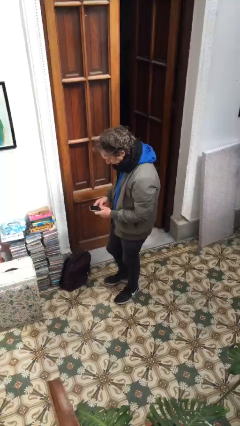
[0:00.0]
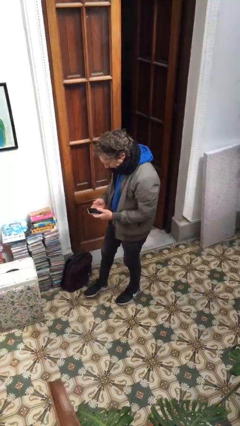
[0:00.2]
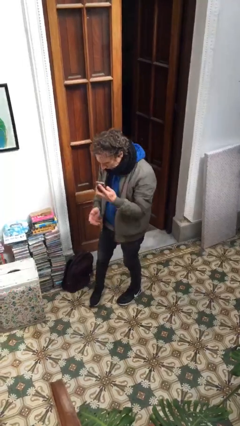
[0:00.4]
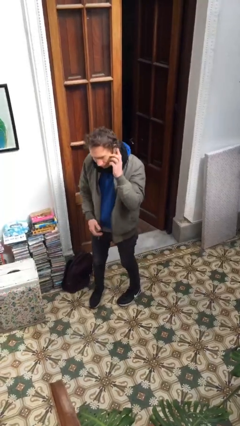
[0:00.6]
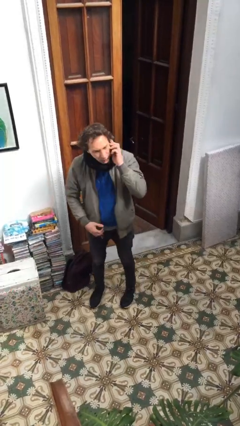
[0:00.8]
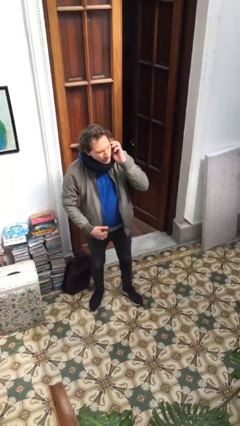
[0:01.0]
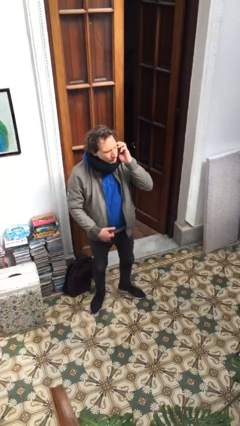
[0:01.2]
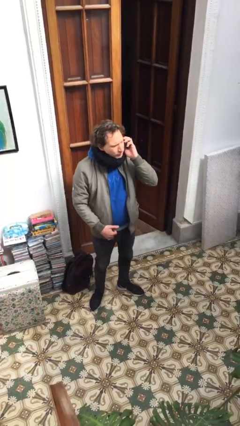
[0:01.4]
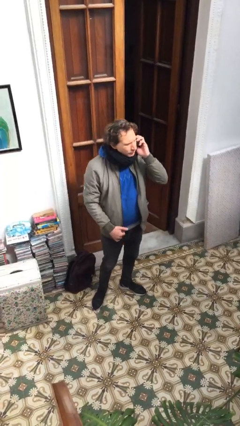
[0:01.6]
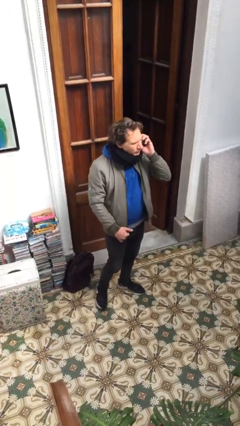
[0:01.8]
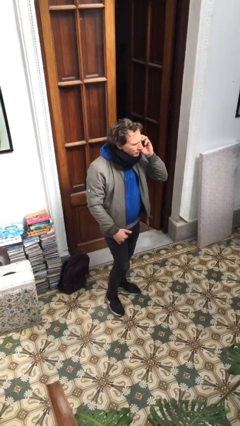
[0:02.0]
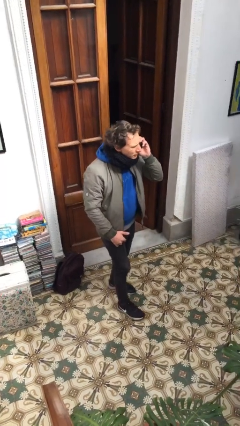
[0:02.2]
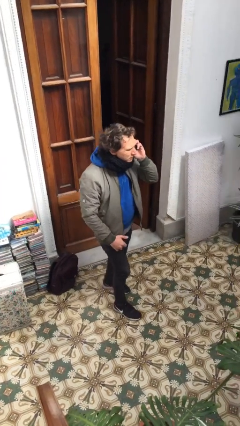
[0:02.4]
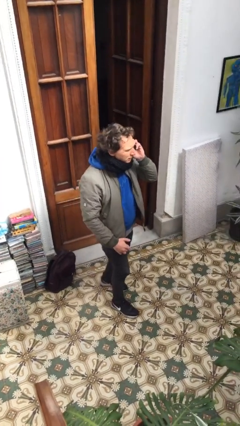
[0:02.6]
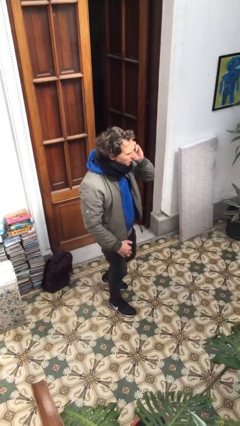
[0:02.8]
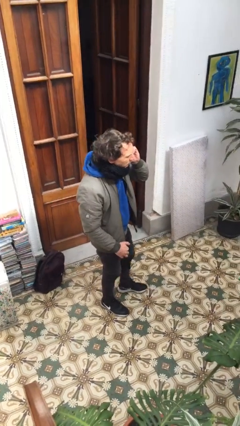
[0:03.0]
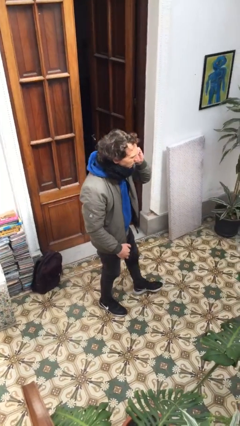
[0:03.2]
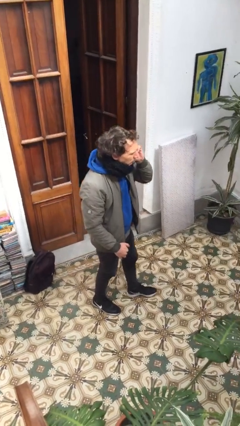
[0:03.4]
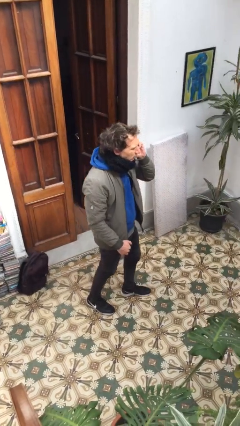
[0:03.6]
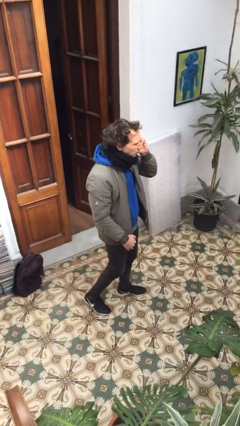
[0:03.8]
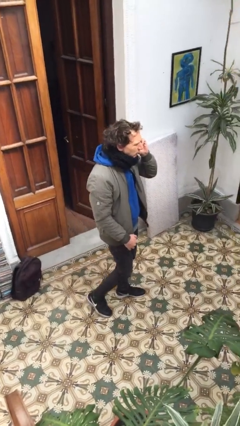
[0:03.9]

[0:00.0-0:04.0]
person talks on phone

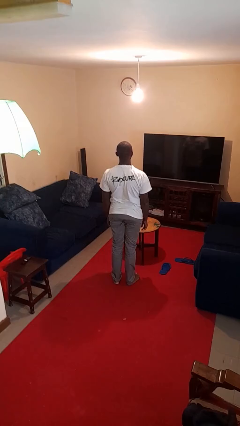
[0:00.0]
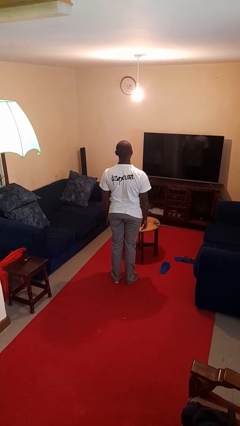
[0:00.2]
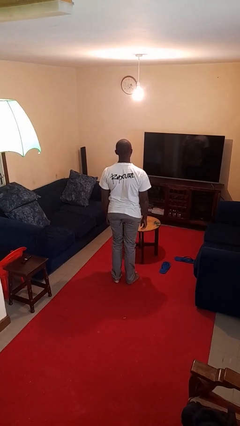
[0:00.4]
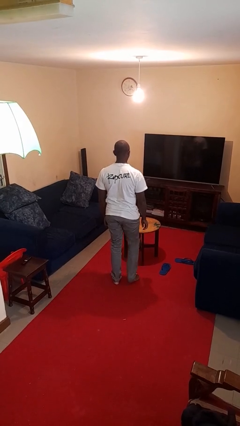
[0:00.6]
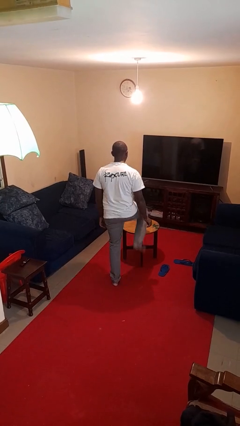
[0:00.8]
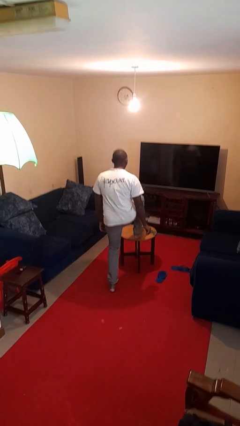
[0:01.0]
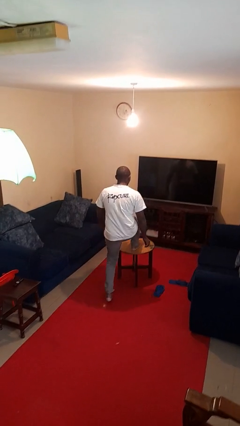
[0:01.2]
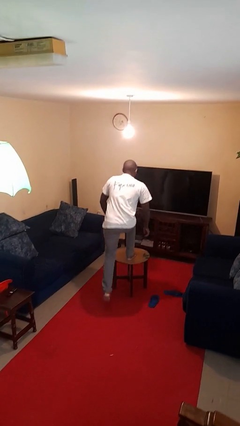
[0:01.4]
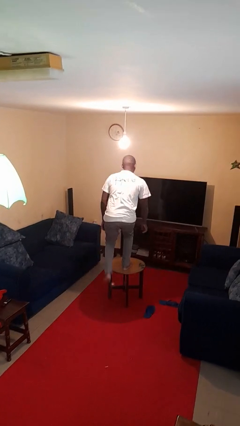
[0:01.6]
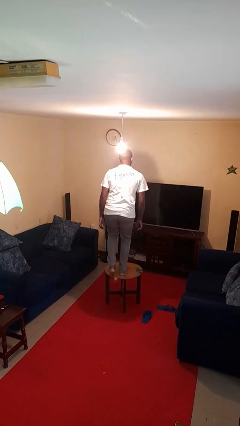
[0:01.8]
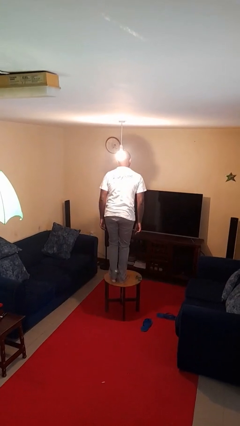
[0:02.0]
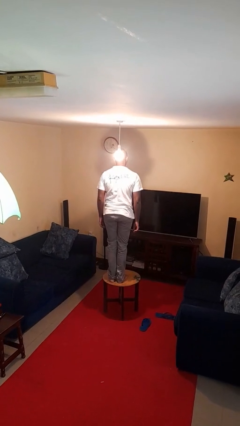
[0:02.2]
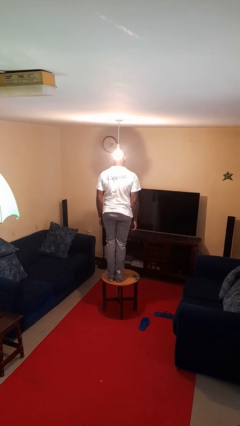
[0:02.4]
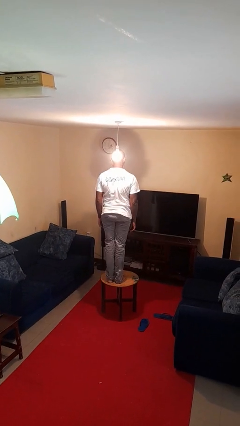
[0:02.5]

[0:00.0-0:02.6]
person climbs on table

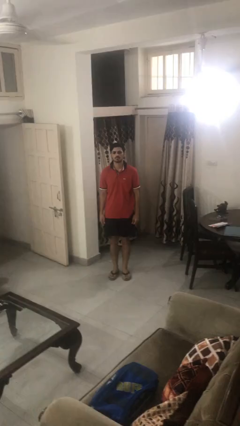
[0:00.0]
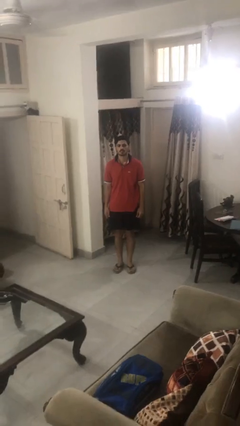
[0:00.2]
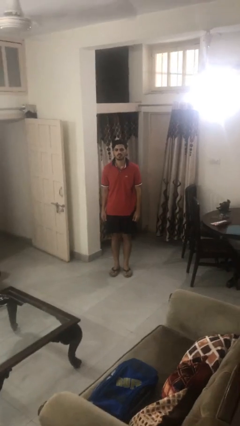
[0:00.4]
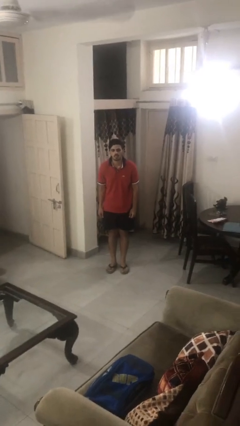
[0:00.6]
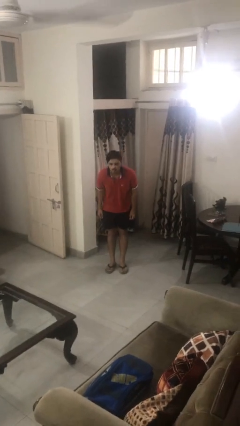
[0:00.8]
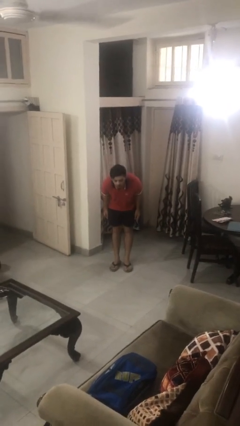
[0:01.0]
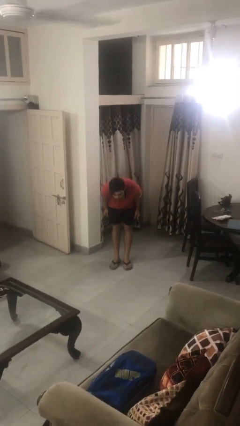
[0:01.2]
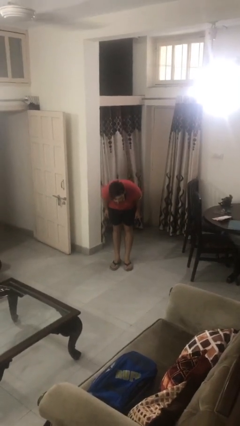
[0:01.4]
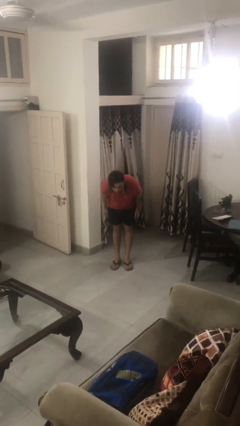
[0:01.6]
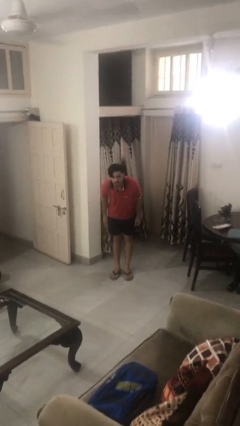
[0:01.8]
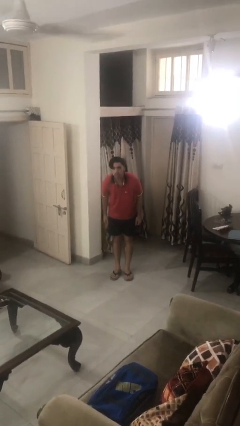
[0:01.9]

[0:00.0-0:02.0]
person bows

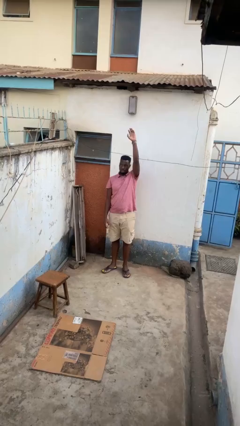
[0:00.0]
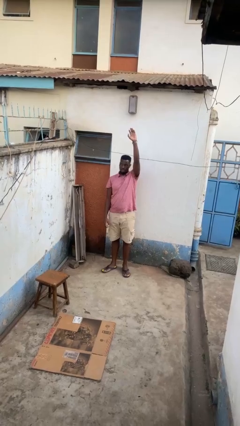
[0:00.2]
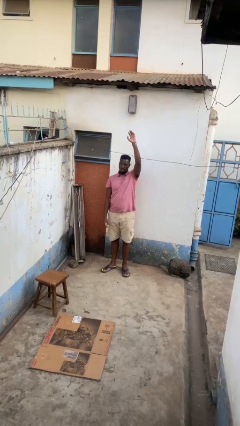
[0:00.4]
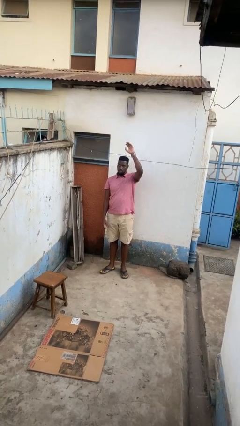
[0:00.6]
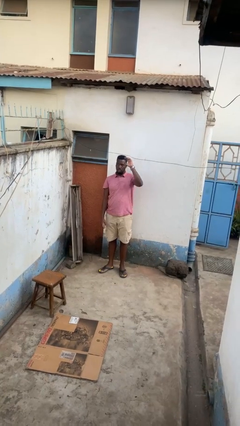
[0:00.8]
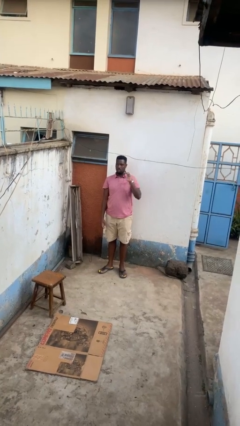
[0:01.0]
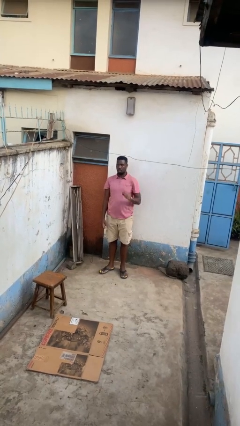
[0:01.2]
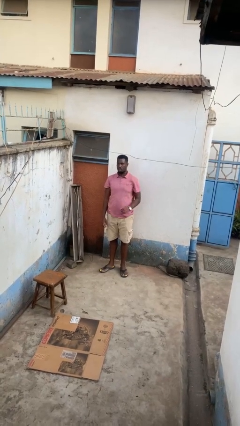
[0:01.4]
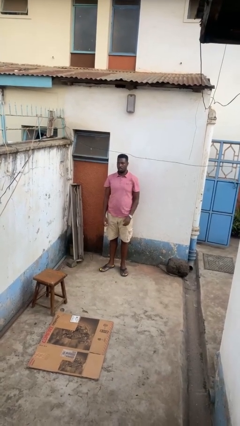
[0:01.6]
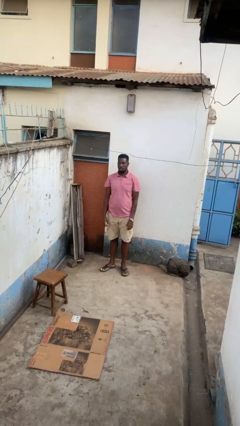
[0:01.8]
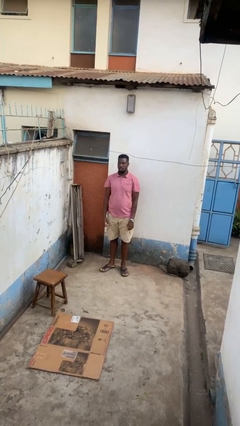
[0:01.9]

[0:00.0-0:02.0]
person gestures lower hand

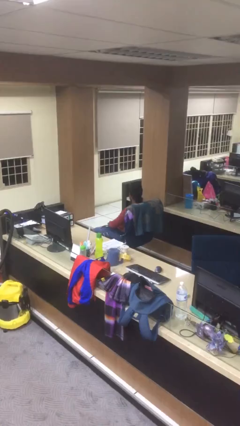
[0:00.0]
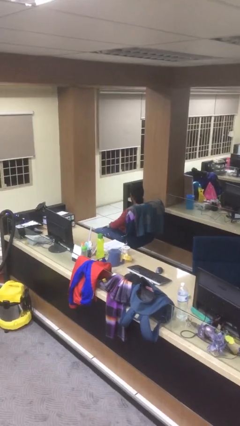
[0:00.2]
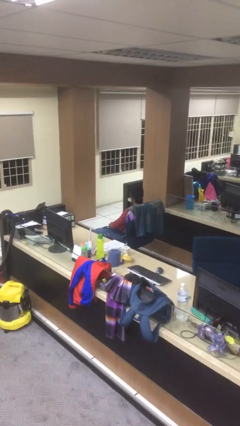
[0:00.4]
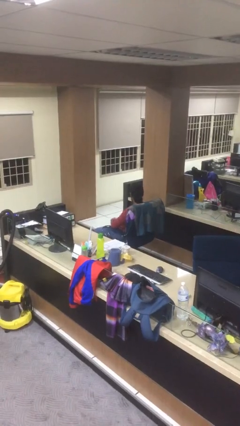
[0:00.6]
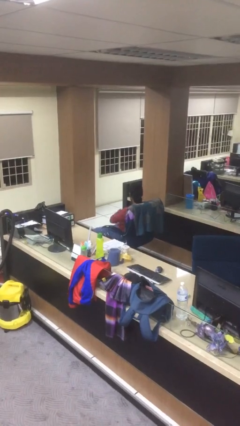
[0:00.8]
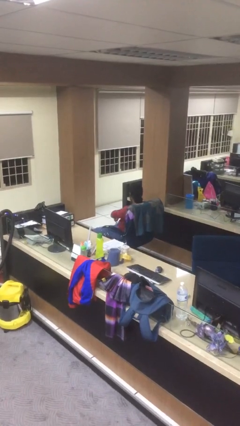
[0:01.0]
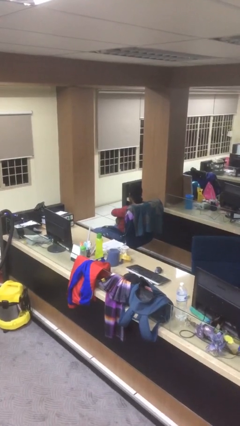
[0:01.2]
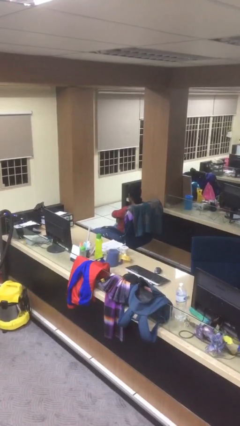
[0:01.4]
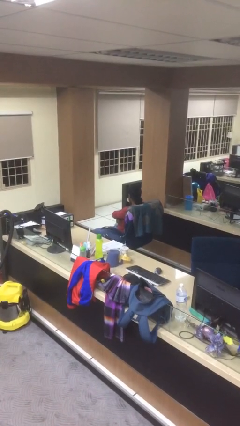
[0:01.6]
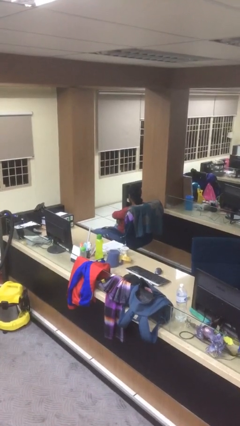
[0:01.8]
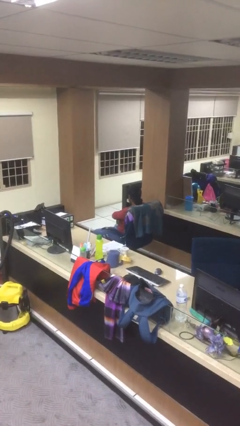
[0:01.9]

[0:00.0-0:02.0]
person crosses arms

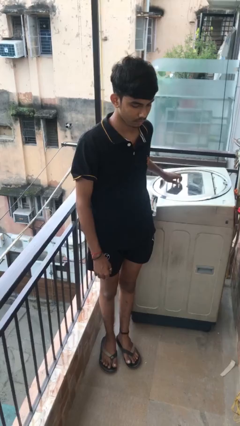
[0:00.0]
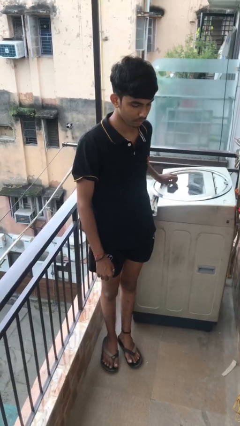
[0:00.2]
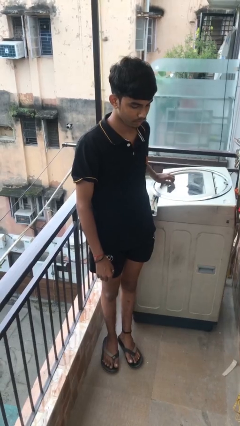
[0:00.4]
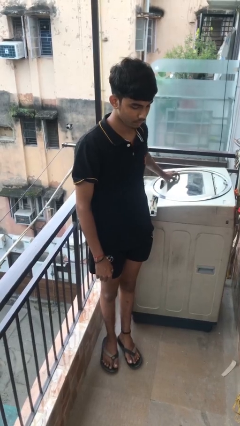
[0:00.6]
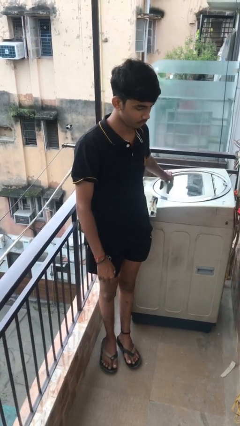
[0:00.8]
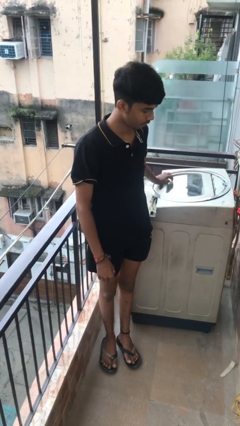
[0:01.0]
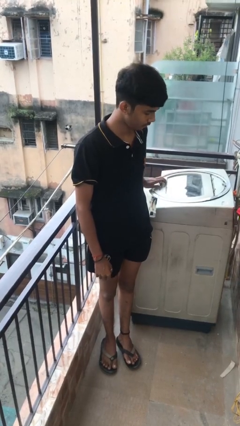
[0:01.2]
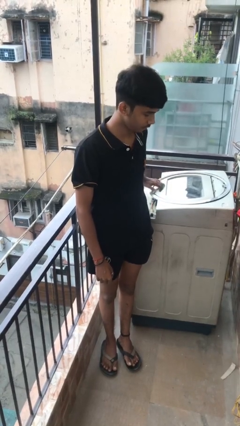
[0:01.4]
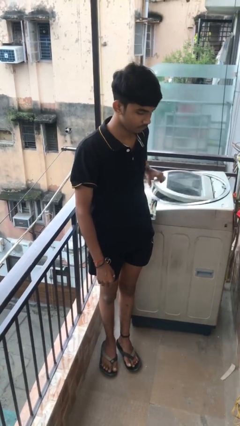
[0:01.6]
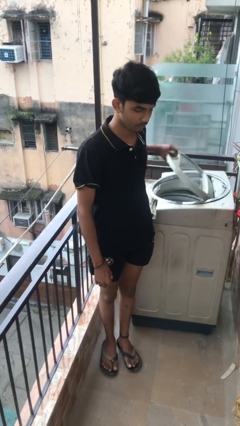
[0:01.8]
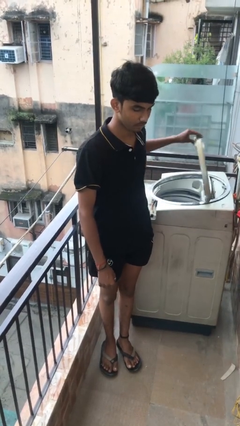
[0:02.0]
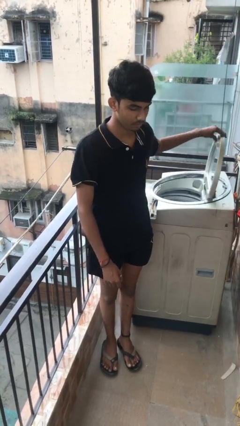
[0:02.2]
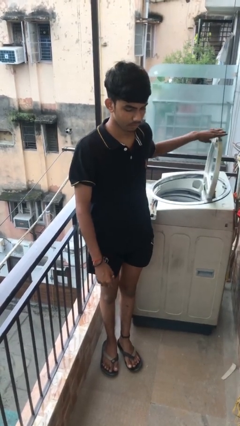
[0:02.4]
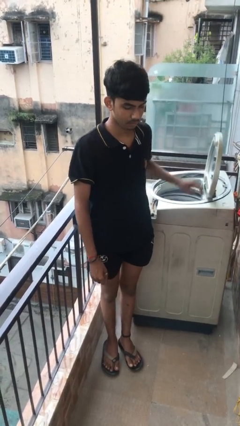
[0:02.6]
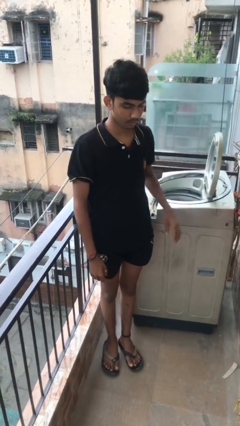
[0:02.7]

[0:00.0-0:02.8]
person opens clothes washer

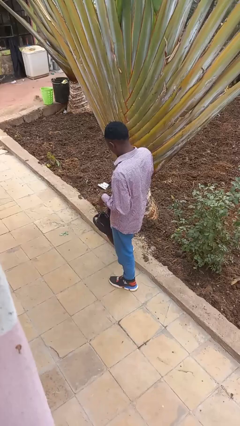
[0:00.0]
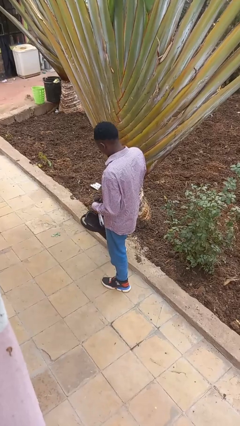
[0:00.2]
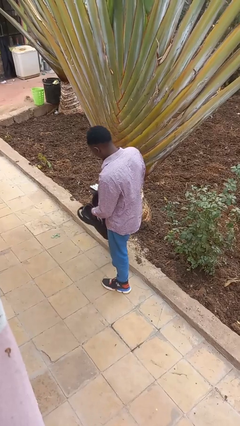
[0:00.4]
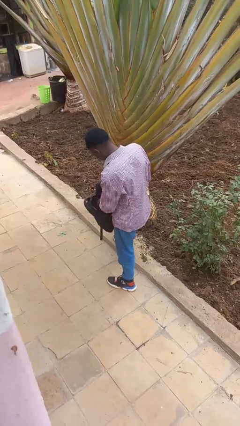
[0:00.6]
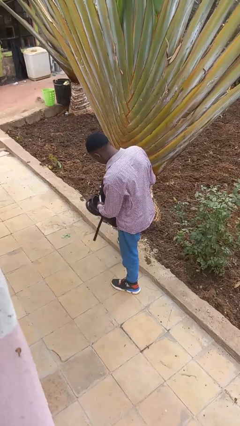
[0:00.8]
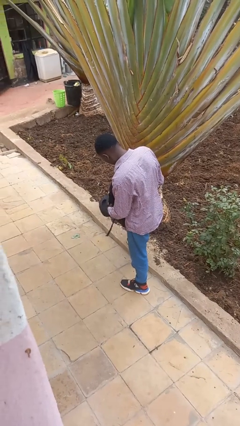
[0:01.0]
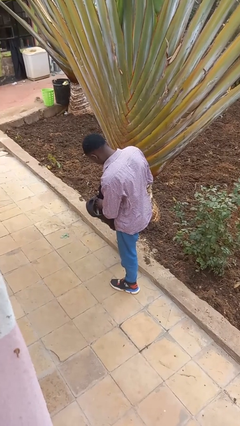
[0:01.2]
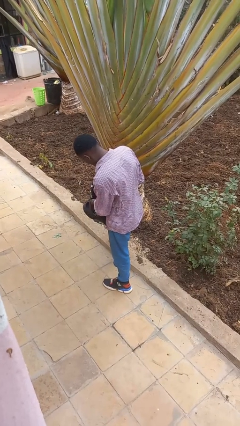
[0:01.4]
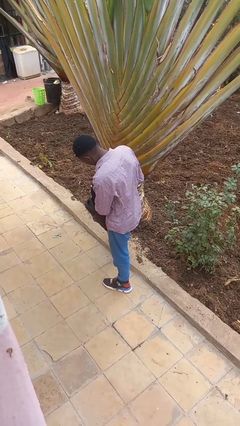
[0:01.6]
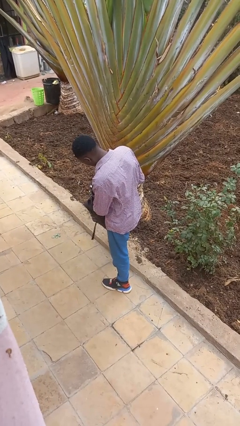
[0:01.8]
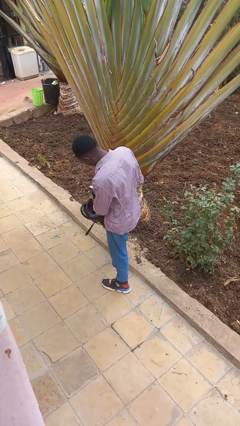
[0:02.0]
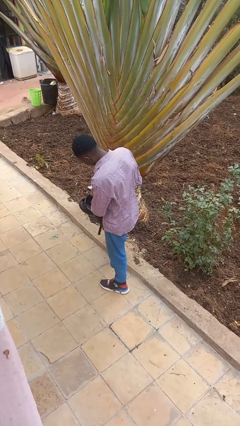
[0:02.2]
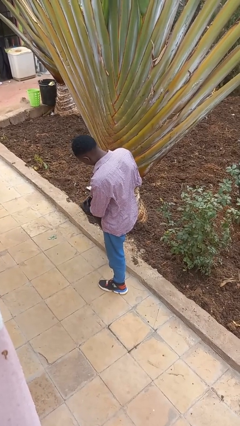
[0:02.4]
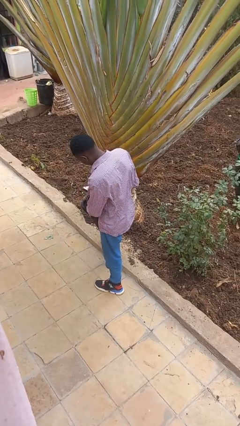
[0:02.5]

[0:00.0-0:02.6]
person searches in backpack
